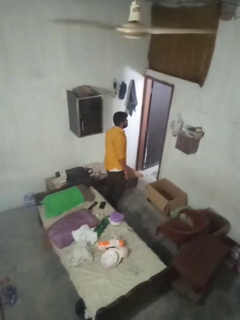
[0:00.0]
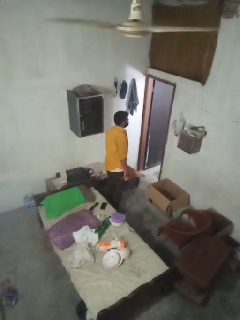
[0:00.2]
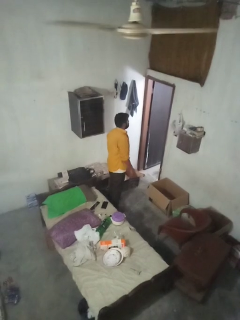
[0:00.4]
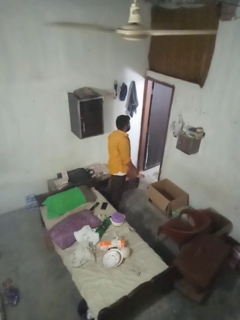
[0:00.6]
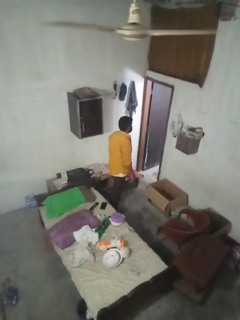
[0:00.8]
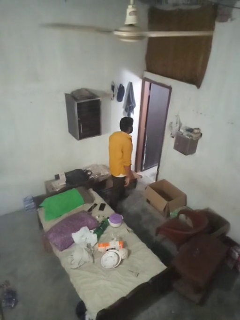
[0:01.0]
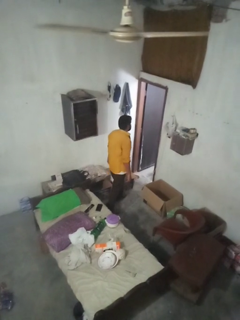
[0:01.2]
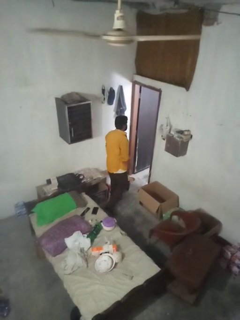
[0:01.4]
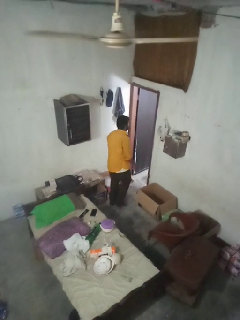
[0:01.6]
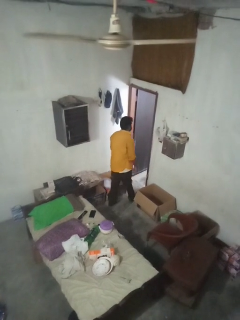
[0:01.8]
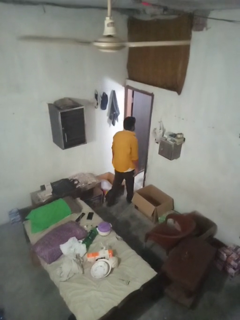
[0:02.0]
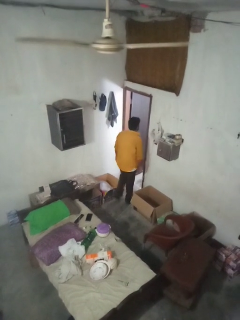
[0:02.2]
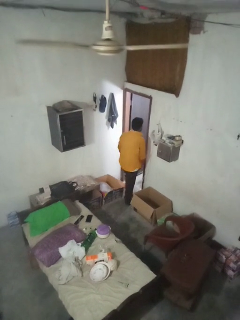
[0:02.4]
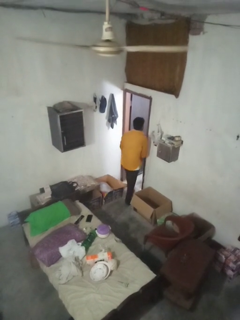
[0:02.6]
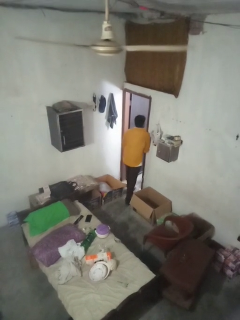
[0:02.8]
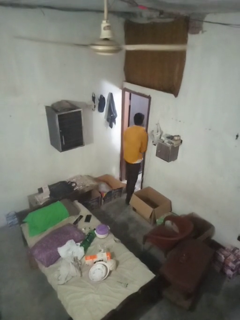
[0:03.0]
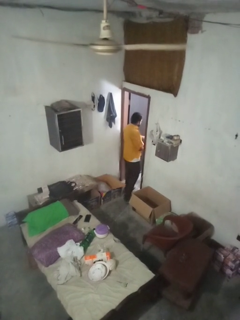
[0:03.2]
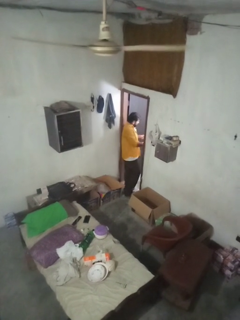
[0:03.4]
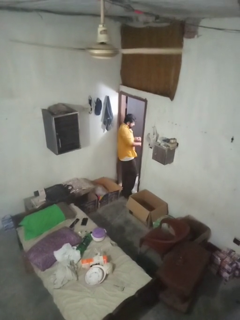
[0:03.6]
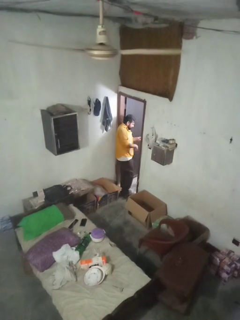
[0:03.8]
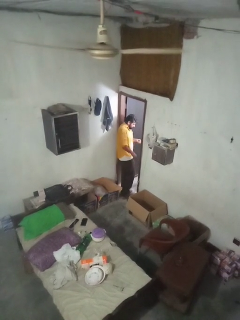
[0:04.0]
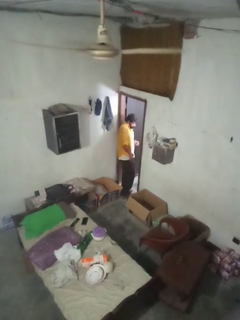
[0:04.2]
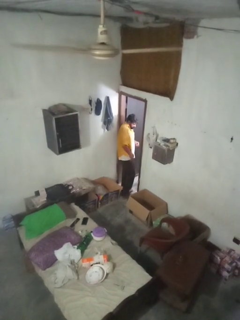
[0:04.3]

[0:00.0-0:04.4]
person bumps into wall

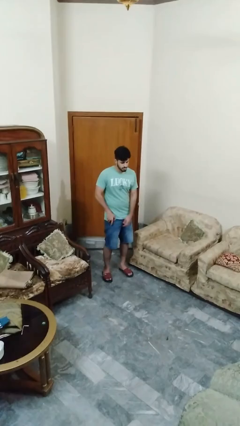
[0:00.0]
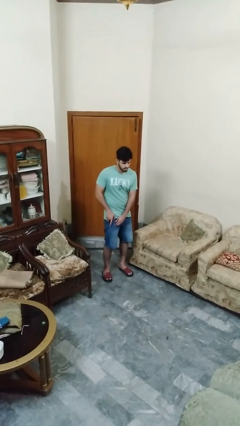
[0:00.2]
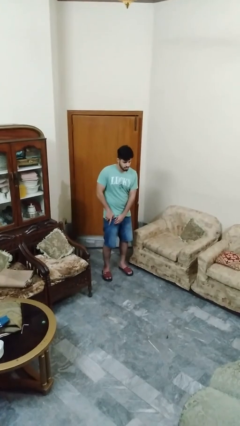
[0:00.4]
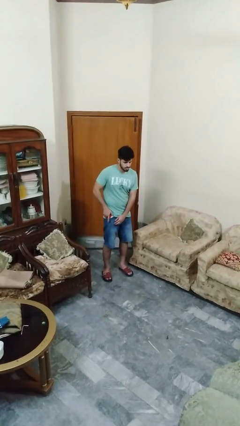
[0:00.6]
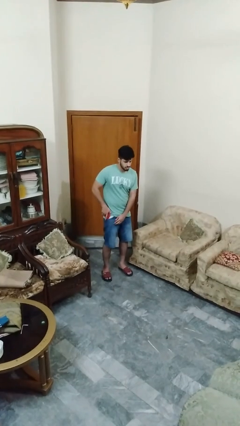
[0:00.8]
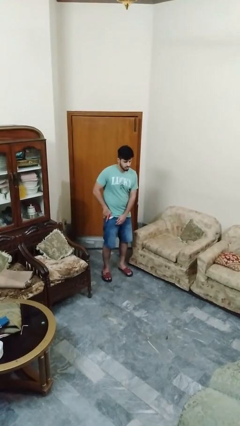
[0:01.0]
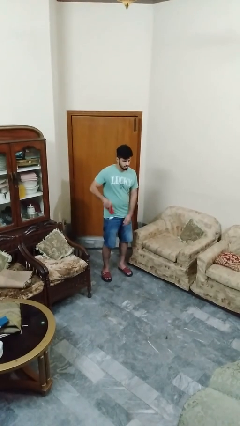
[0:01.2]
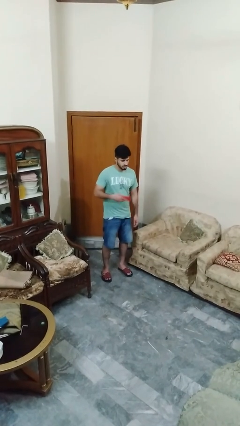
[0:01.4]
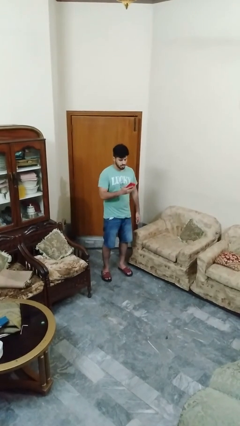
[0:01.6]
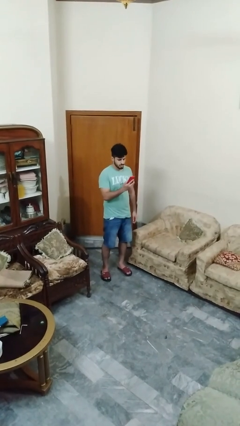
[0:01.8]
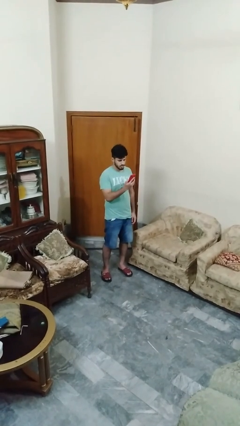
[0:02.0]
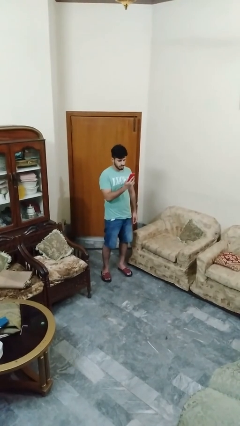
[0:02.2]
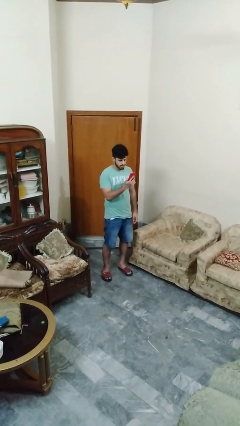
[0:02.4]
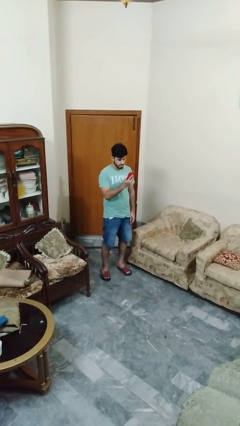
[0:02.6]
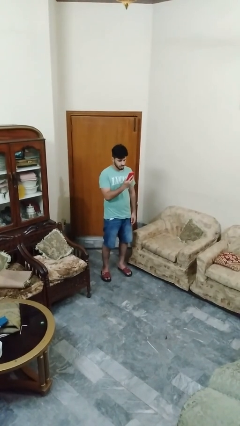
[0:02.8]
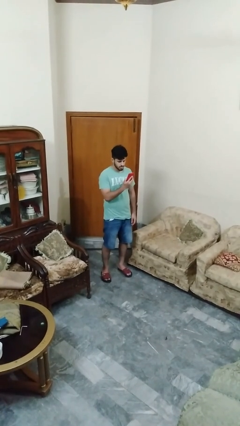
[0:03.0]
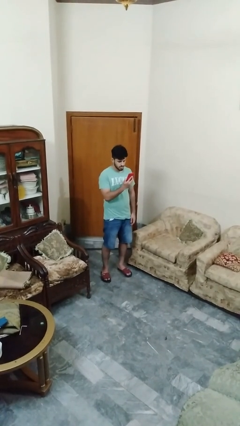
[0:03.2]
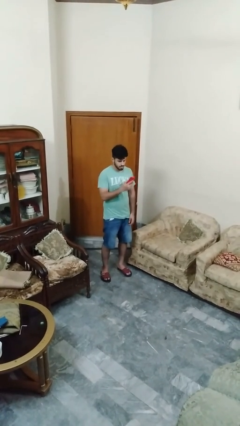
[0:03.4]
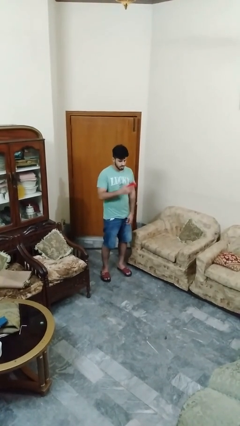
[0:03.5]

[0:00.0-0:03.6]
person takes phone from pocket

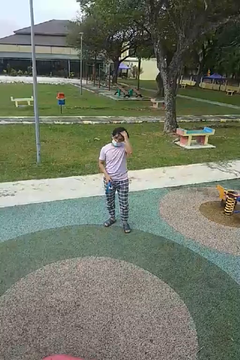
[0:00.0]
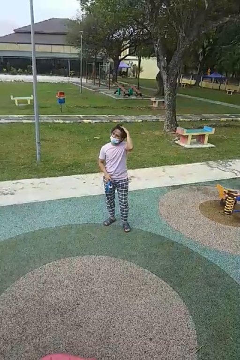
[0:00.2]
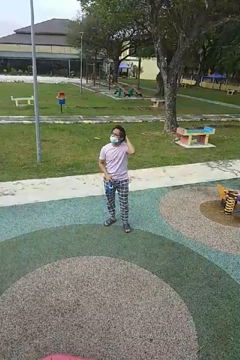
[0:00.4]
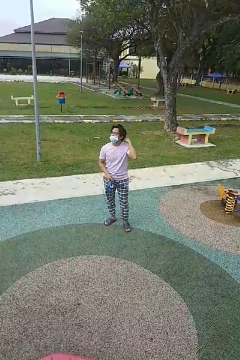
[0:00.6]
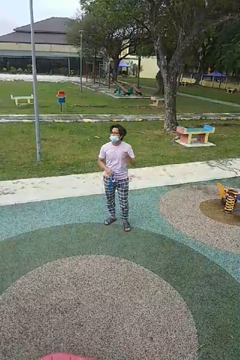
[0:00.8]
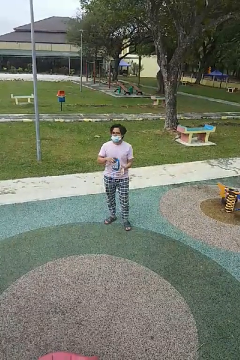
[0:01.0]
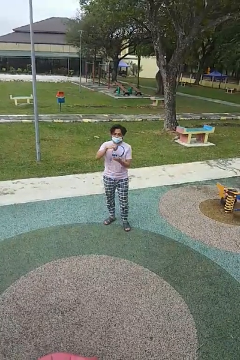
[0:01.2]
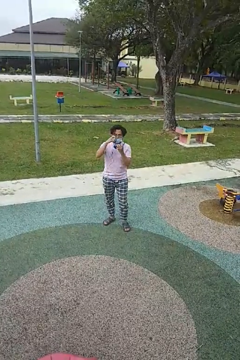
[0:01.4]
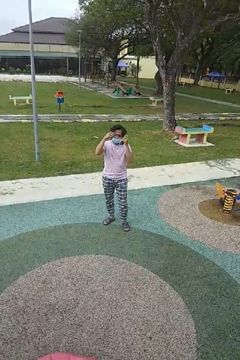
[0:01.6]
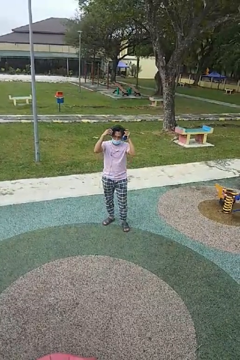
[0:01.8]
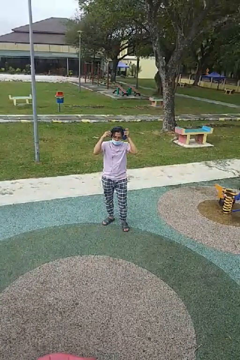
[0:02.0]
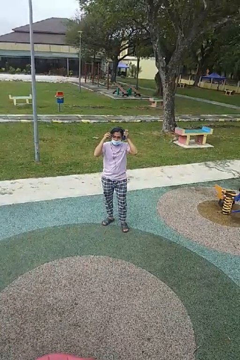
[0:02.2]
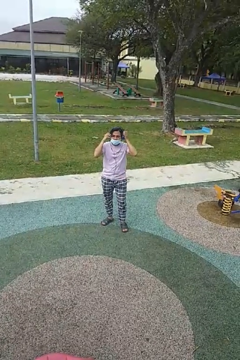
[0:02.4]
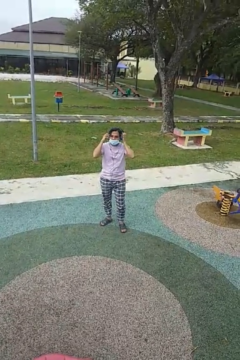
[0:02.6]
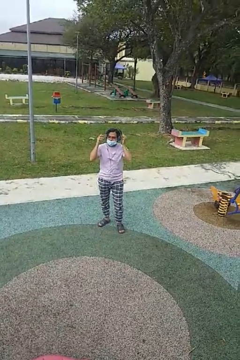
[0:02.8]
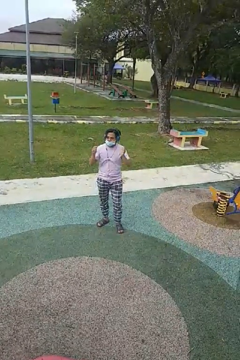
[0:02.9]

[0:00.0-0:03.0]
person puts on headphones

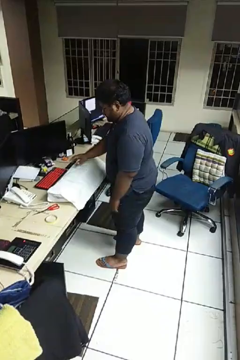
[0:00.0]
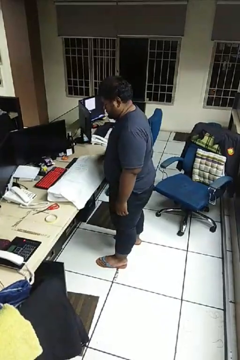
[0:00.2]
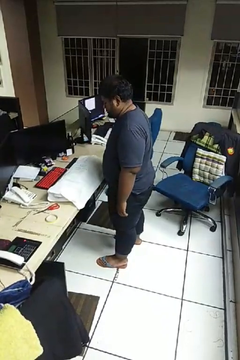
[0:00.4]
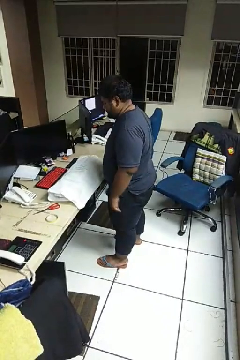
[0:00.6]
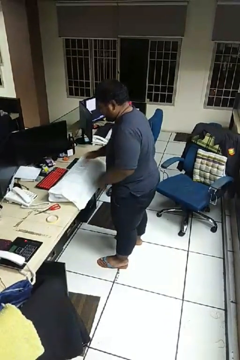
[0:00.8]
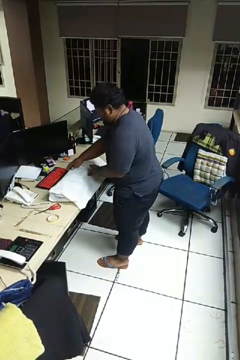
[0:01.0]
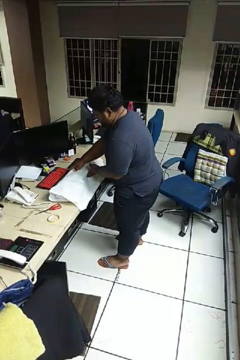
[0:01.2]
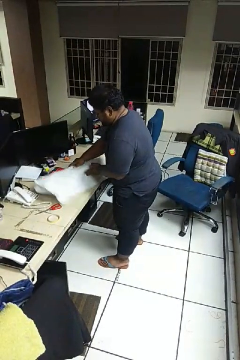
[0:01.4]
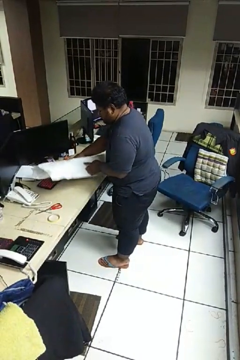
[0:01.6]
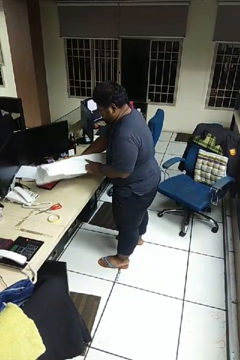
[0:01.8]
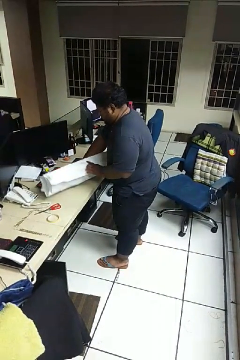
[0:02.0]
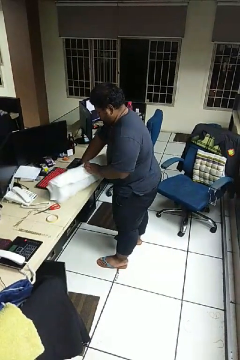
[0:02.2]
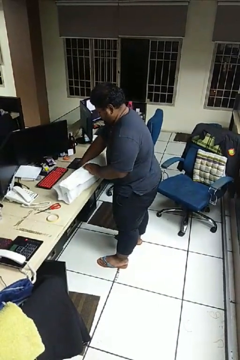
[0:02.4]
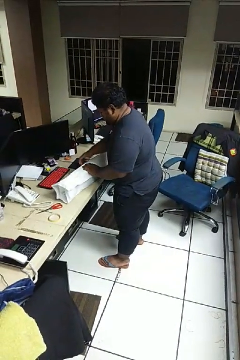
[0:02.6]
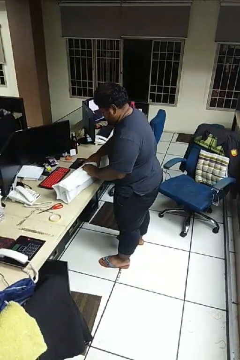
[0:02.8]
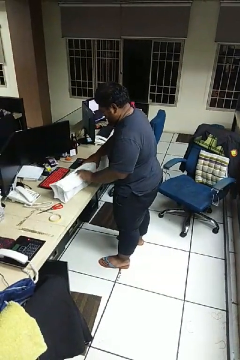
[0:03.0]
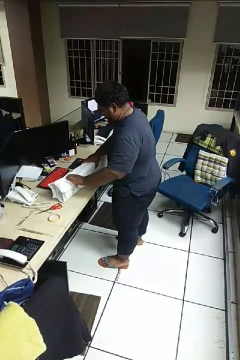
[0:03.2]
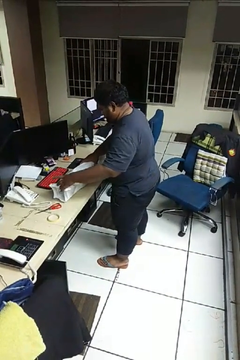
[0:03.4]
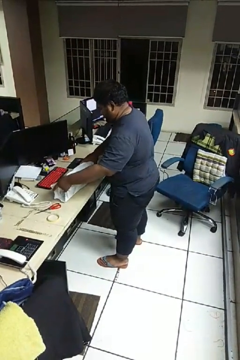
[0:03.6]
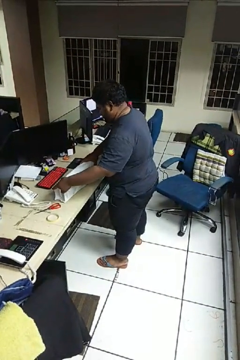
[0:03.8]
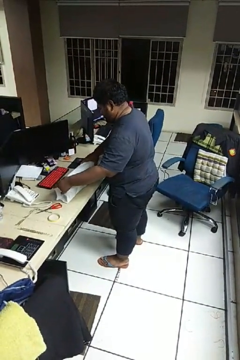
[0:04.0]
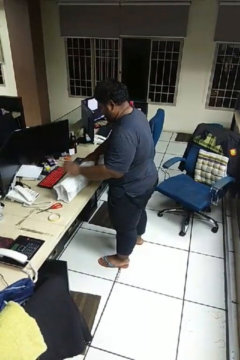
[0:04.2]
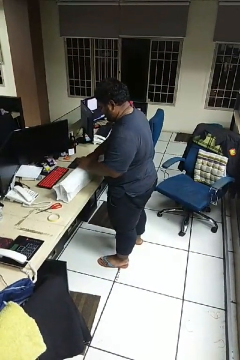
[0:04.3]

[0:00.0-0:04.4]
person wraps box

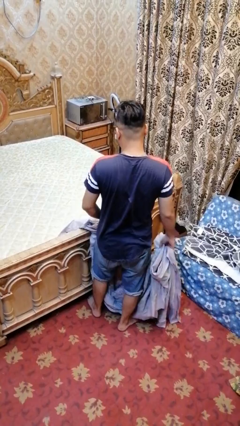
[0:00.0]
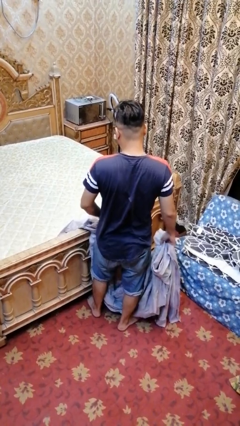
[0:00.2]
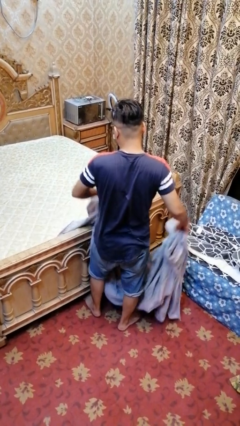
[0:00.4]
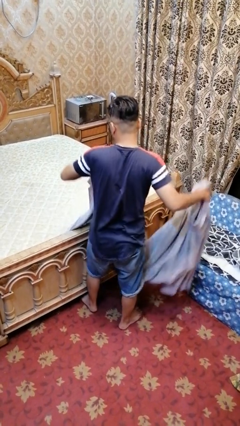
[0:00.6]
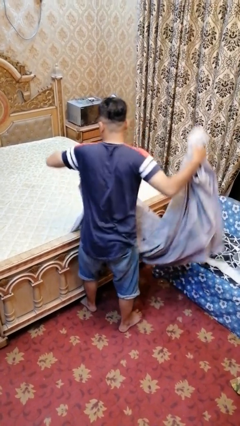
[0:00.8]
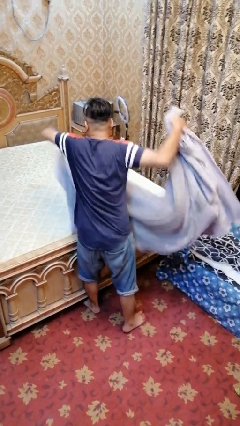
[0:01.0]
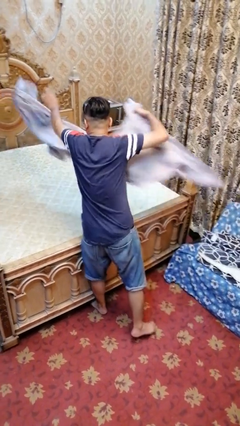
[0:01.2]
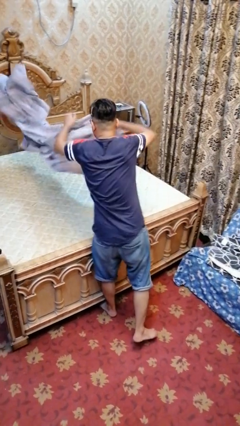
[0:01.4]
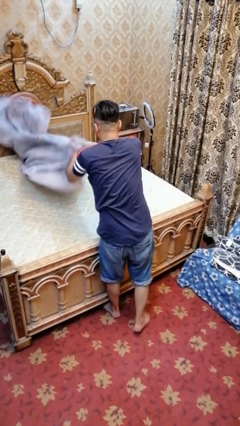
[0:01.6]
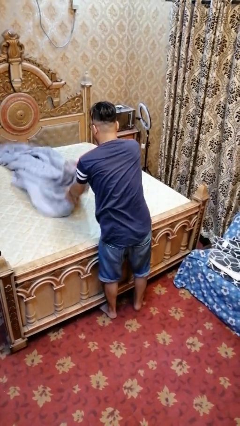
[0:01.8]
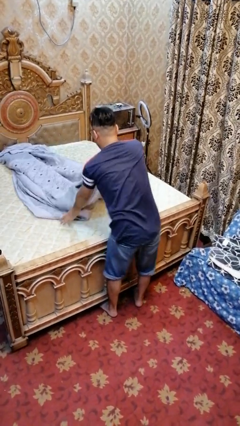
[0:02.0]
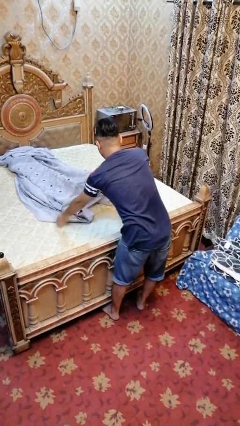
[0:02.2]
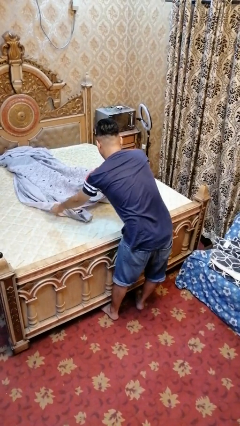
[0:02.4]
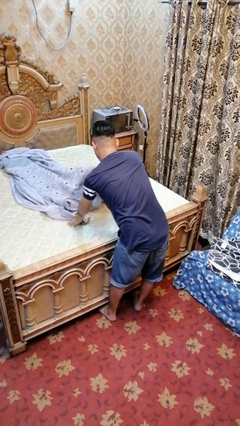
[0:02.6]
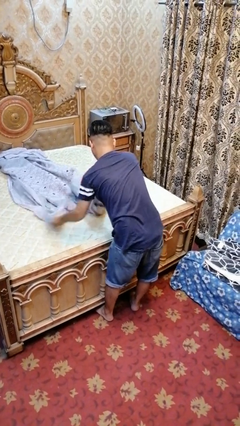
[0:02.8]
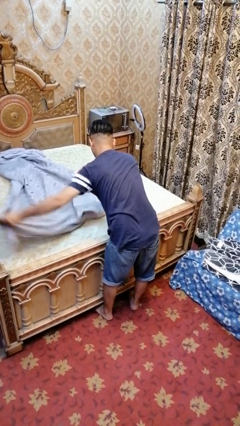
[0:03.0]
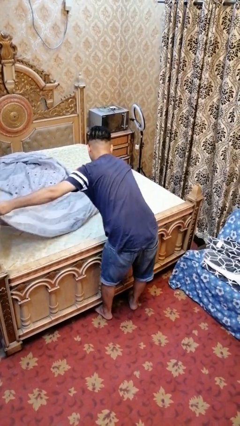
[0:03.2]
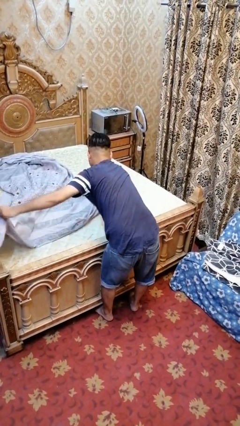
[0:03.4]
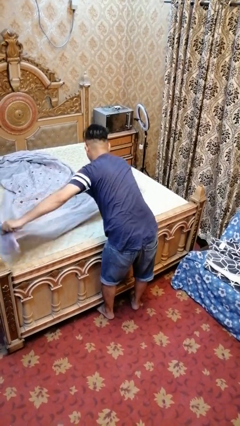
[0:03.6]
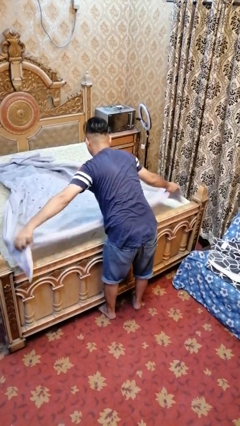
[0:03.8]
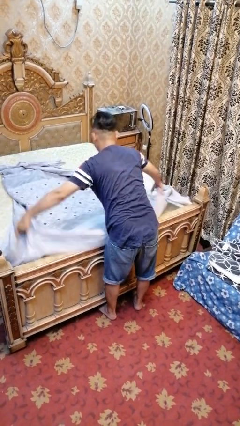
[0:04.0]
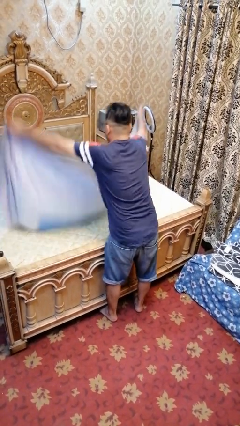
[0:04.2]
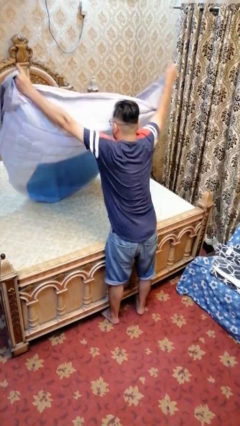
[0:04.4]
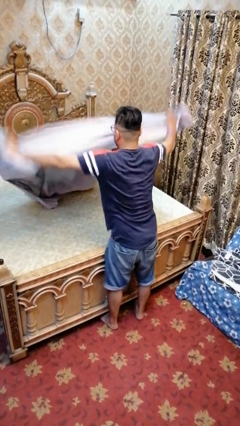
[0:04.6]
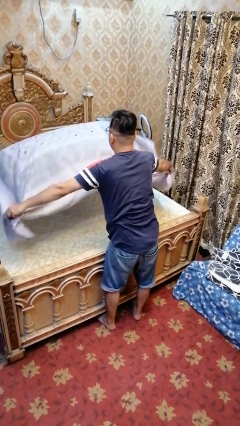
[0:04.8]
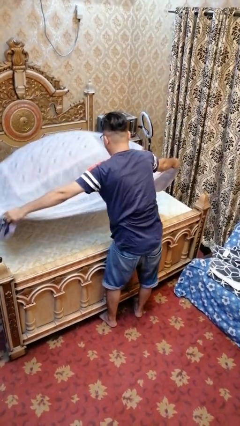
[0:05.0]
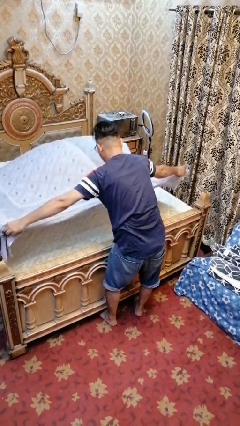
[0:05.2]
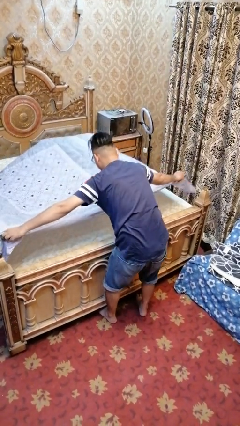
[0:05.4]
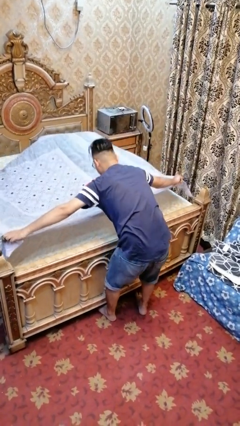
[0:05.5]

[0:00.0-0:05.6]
person makes bed
